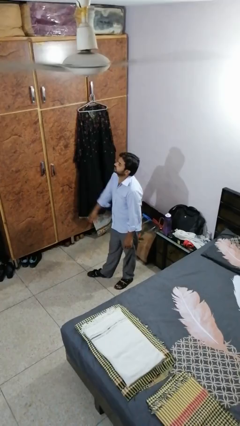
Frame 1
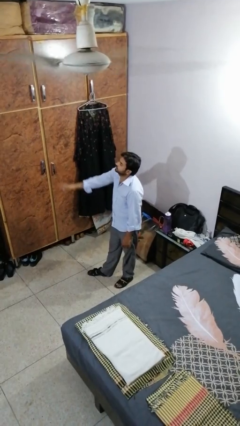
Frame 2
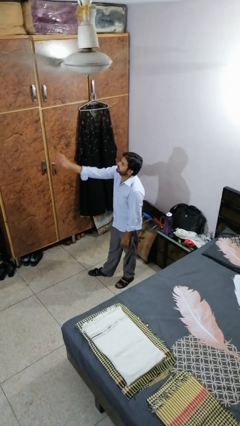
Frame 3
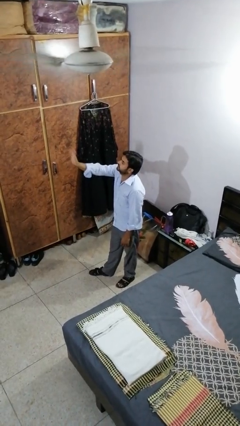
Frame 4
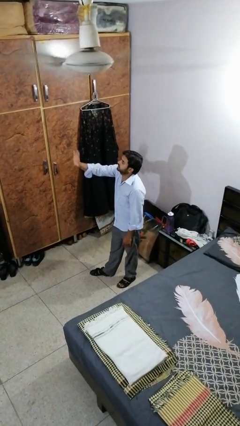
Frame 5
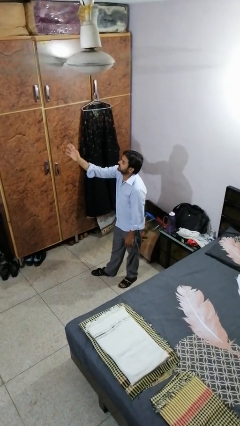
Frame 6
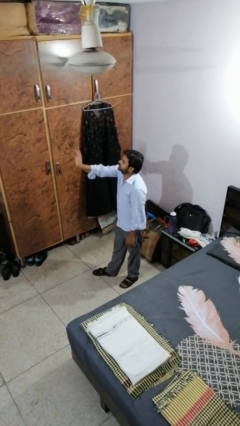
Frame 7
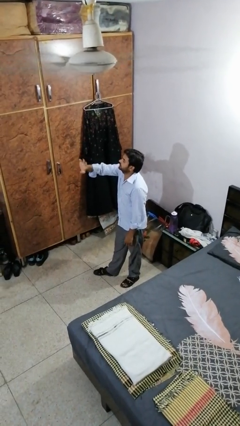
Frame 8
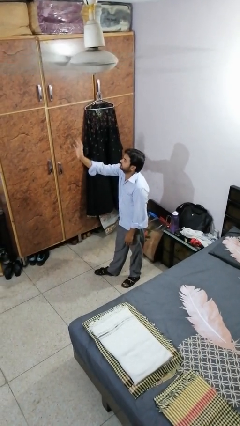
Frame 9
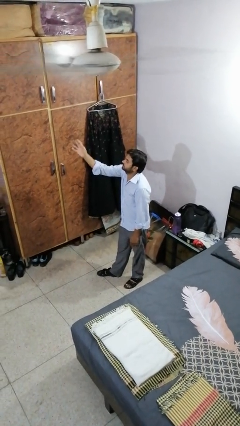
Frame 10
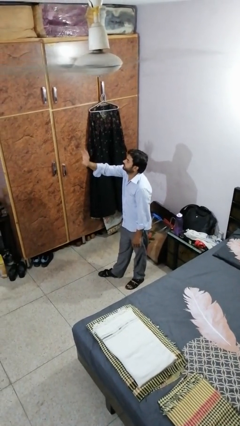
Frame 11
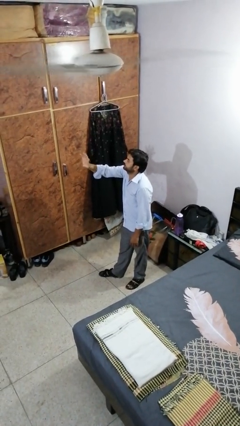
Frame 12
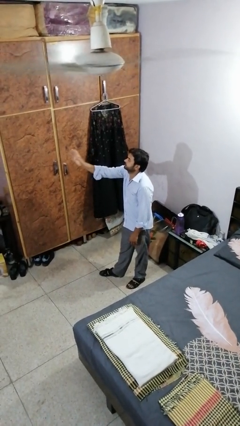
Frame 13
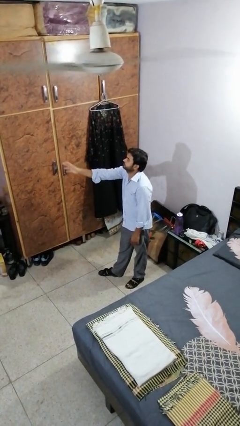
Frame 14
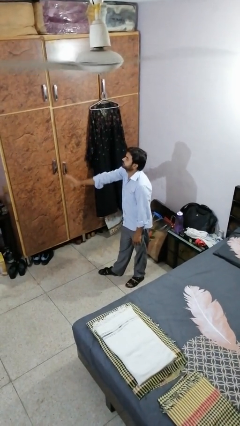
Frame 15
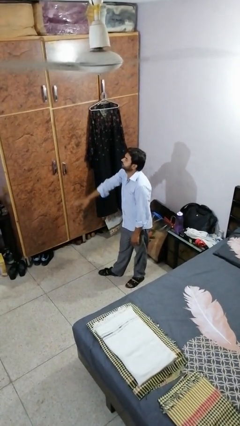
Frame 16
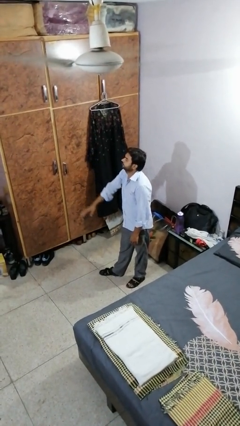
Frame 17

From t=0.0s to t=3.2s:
person waves at person

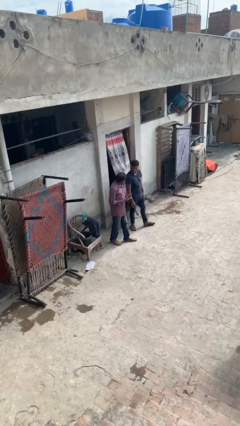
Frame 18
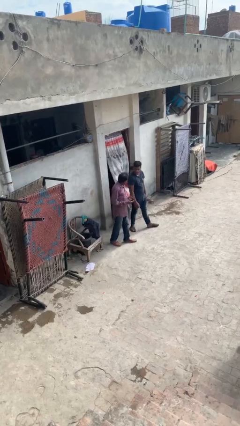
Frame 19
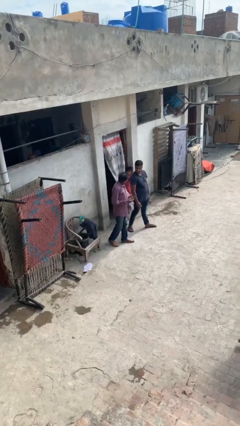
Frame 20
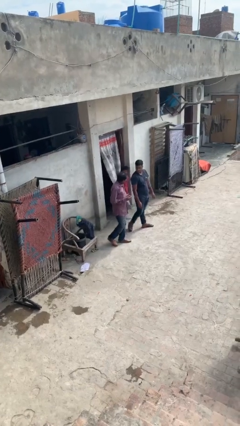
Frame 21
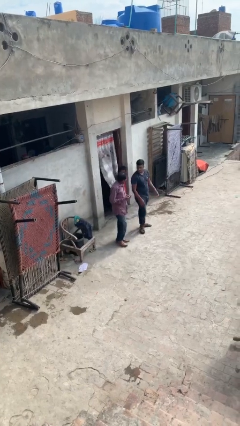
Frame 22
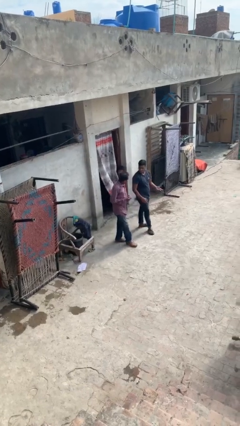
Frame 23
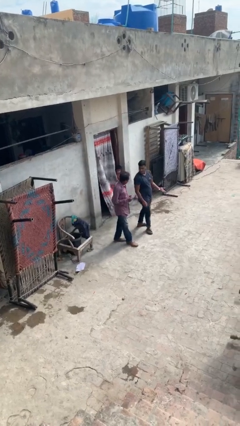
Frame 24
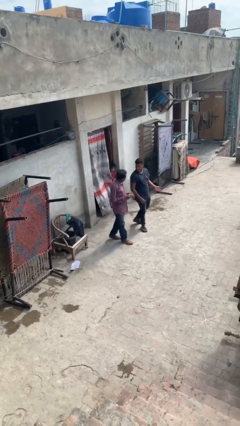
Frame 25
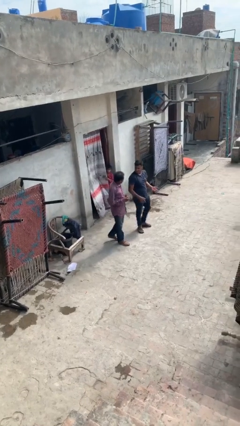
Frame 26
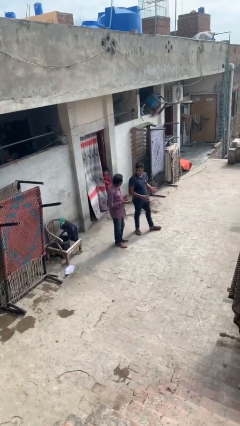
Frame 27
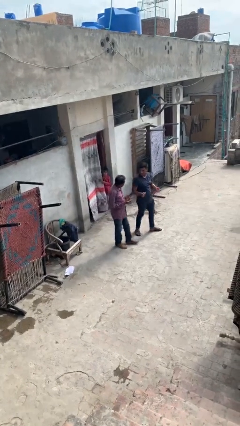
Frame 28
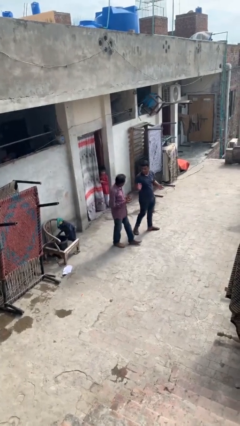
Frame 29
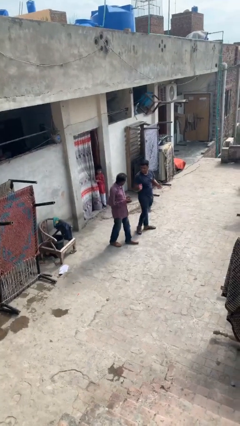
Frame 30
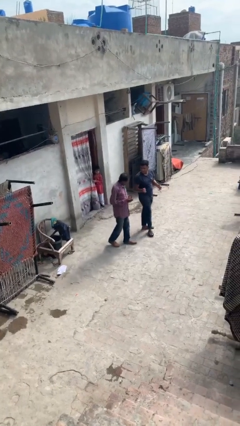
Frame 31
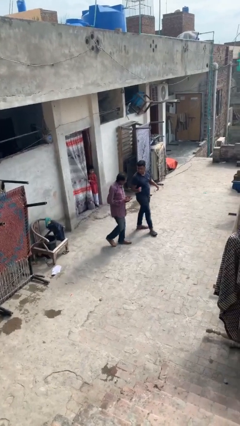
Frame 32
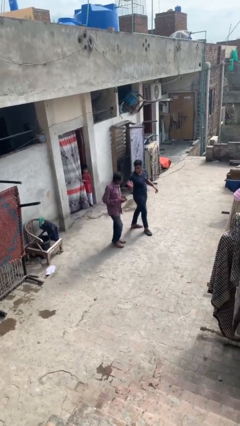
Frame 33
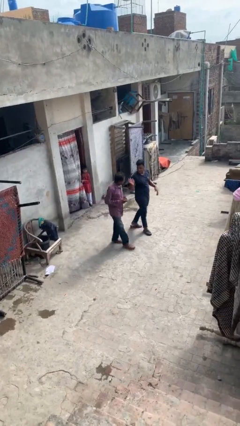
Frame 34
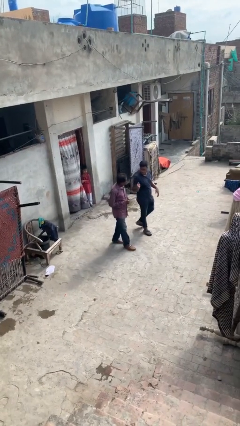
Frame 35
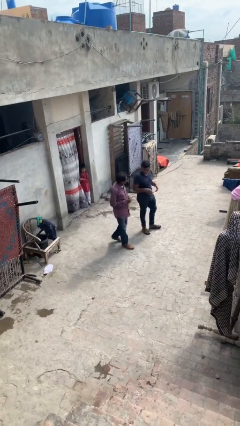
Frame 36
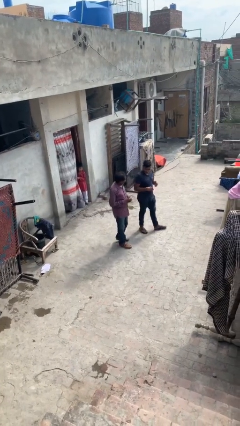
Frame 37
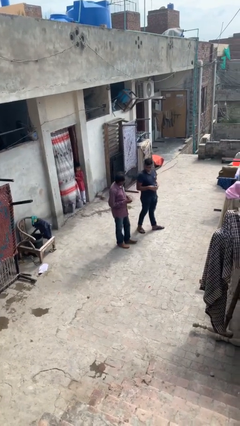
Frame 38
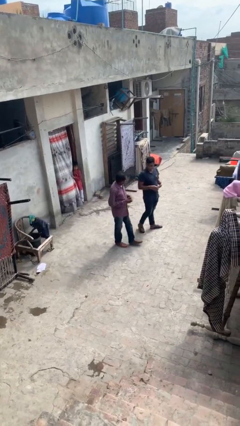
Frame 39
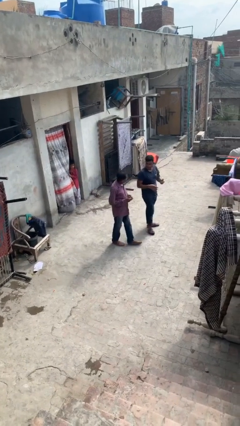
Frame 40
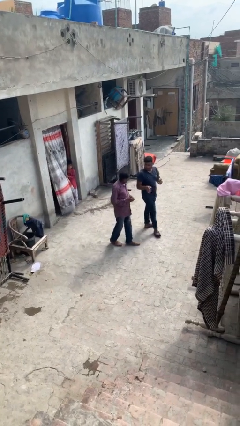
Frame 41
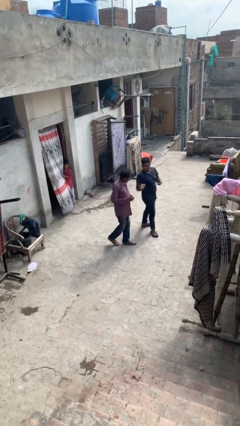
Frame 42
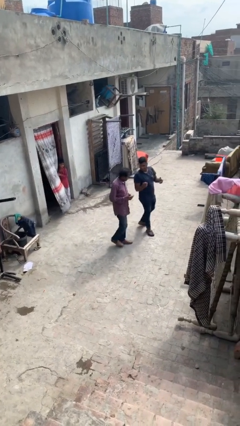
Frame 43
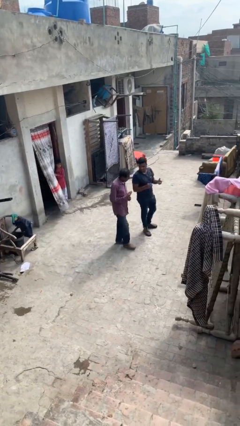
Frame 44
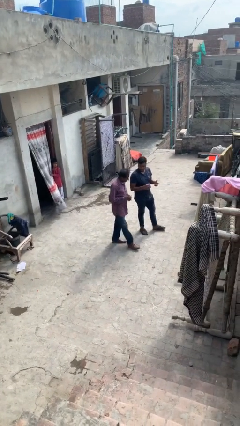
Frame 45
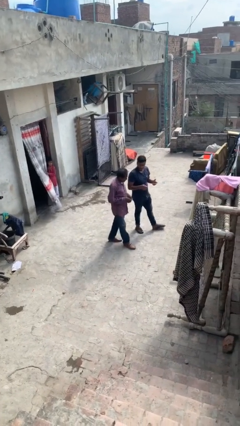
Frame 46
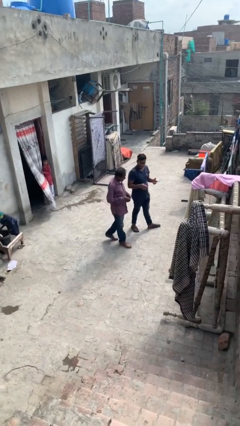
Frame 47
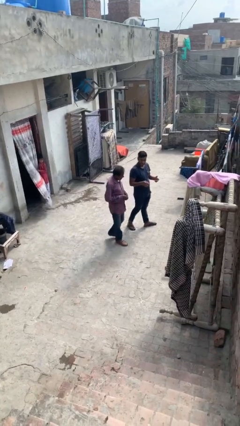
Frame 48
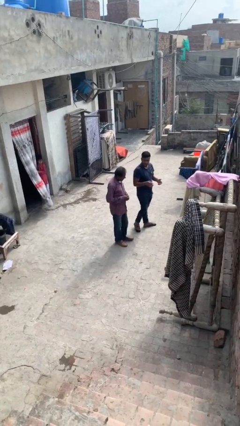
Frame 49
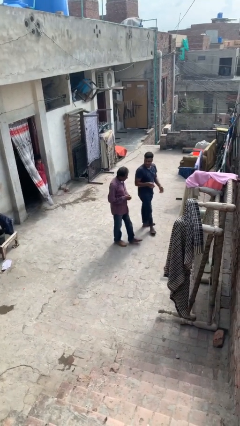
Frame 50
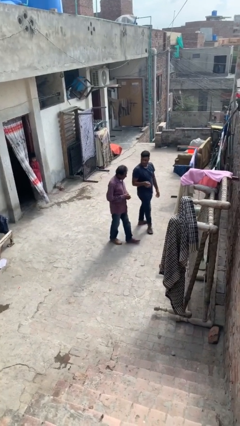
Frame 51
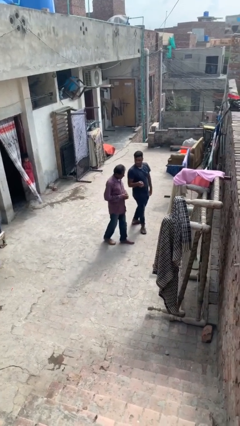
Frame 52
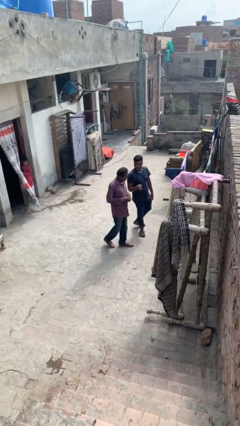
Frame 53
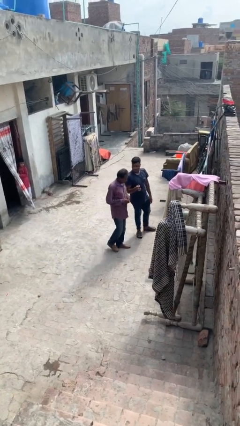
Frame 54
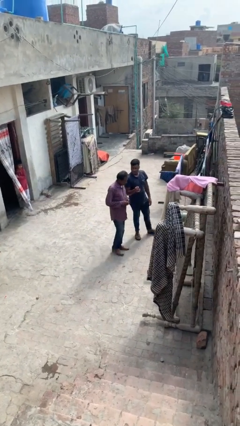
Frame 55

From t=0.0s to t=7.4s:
person talks to person

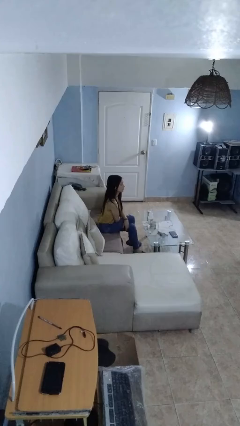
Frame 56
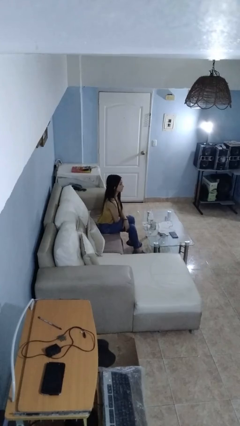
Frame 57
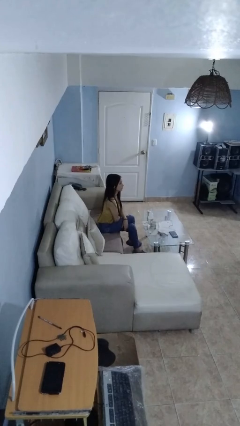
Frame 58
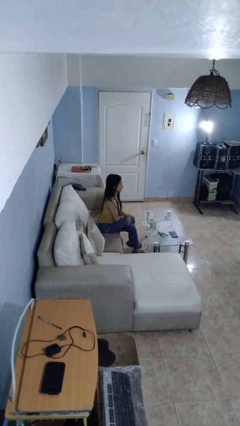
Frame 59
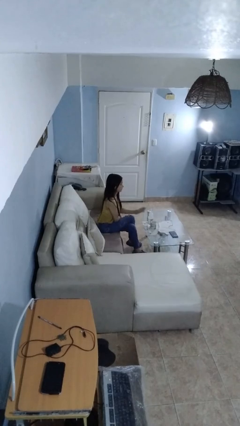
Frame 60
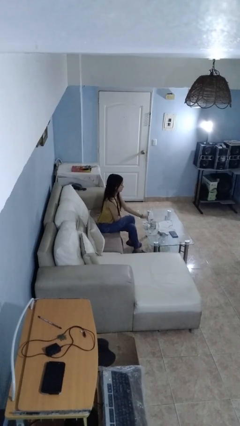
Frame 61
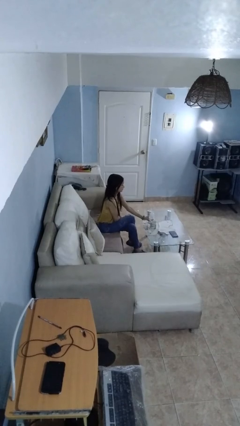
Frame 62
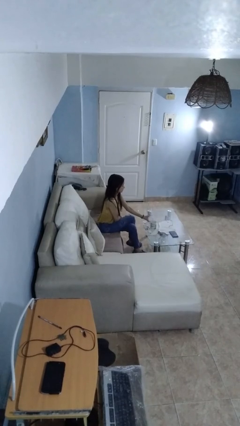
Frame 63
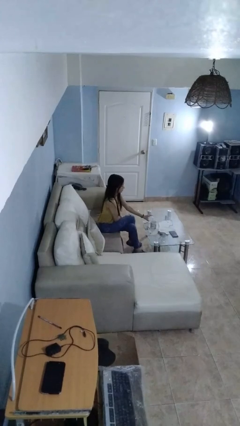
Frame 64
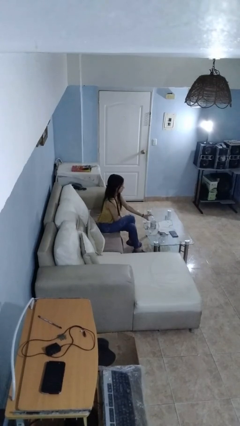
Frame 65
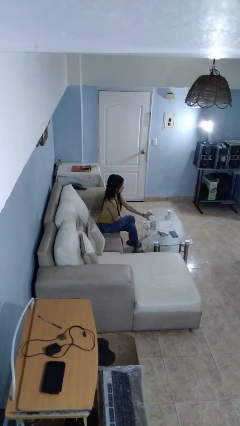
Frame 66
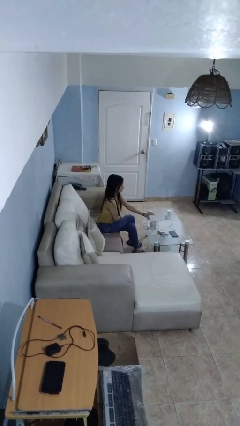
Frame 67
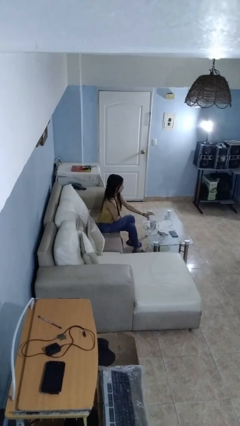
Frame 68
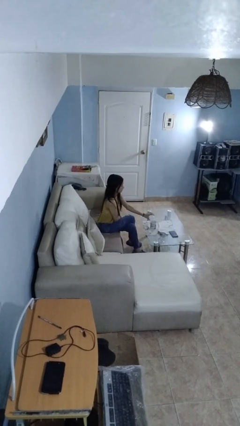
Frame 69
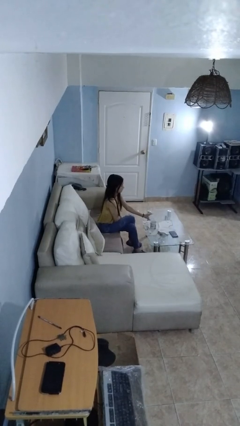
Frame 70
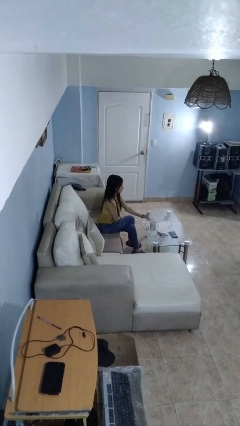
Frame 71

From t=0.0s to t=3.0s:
person pours liquid into cup

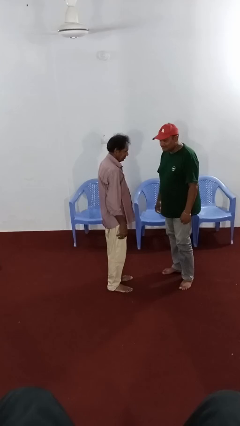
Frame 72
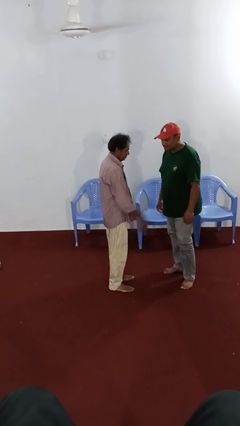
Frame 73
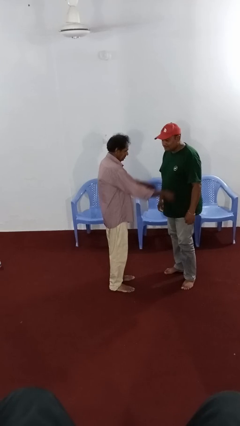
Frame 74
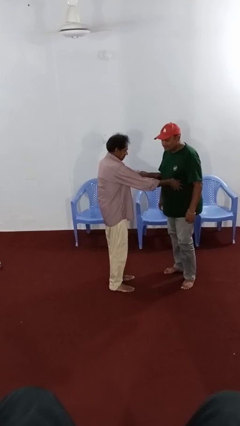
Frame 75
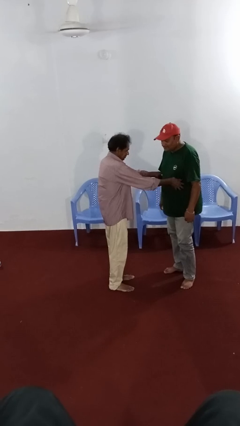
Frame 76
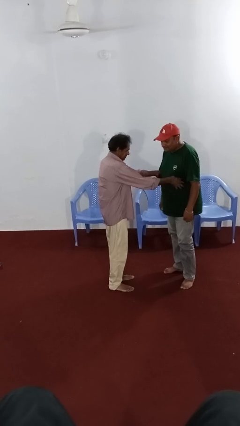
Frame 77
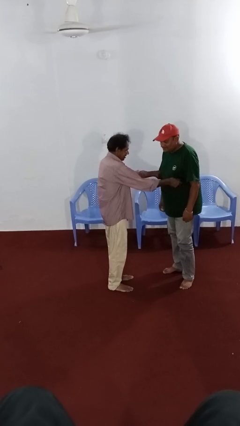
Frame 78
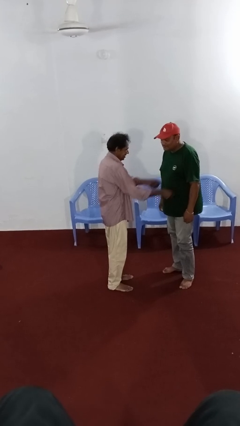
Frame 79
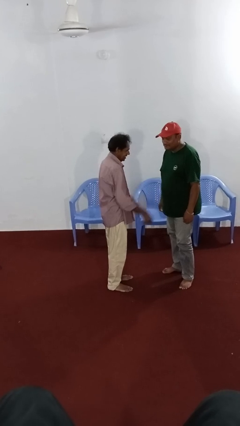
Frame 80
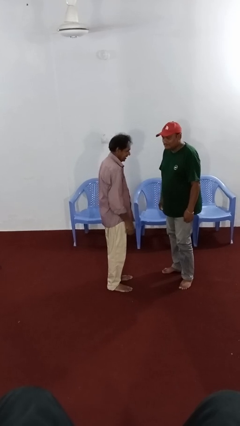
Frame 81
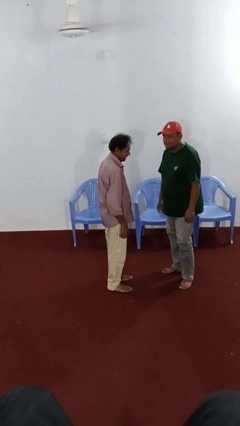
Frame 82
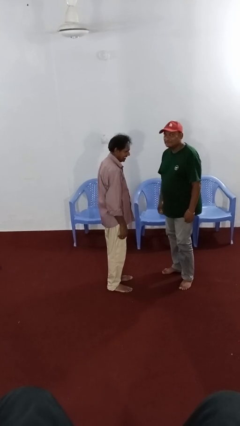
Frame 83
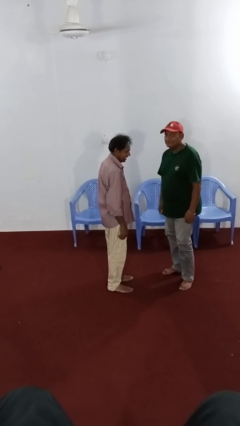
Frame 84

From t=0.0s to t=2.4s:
person tickles person

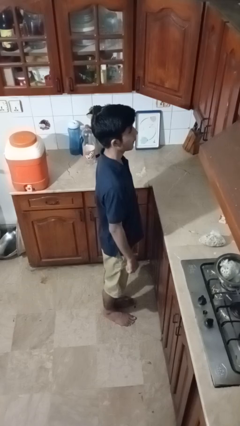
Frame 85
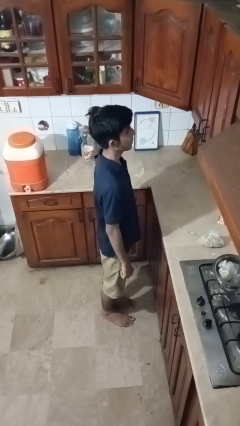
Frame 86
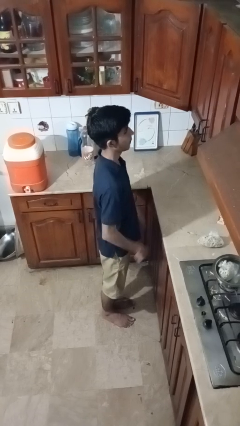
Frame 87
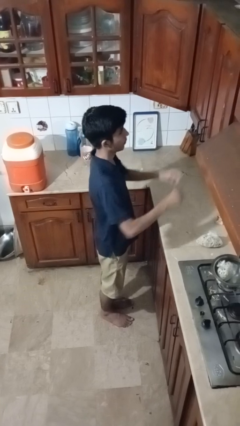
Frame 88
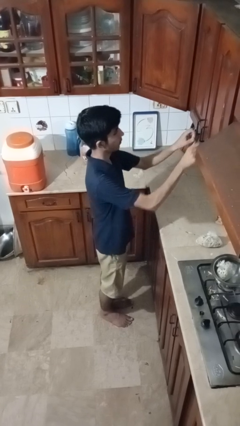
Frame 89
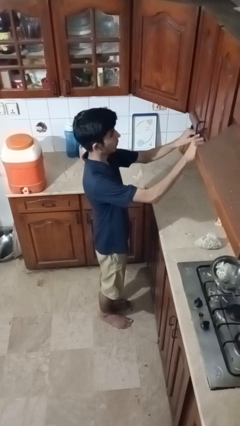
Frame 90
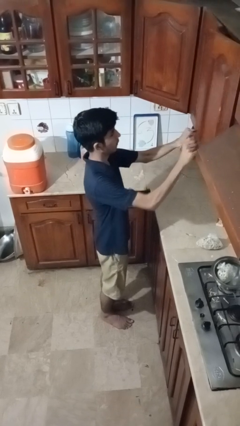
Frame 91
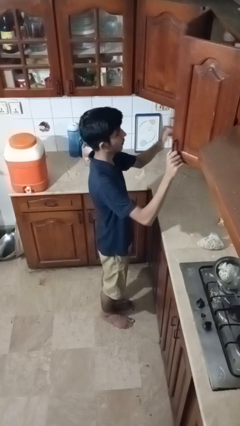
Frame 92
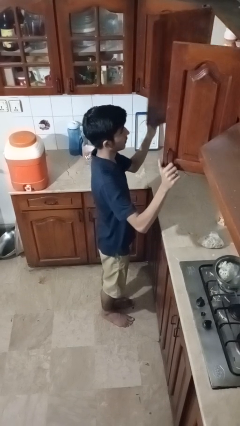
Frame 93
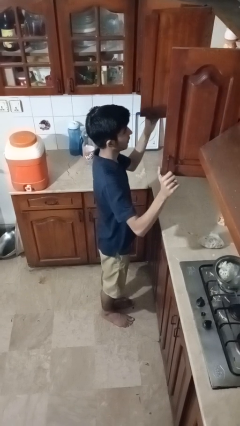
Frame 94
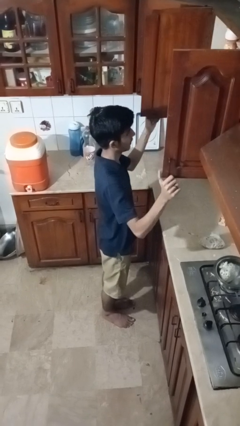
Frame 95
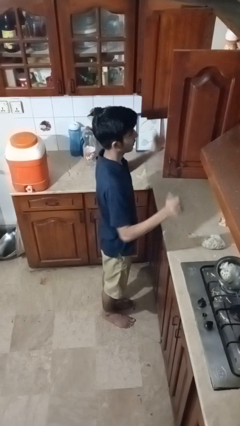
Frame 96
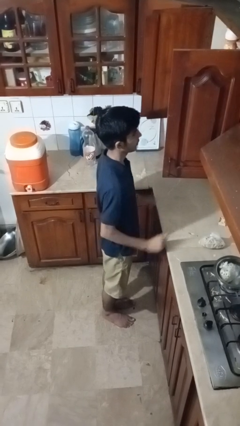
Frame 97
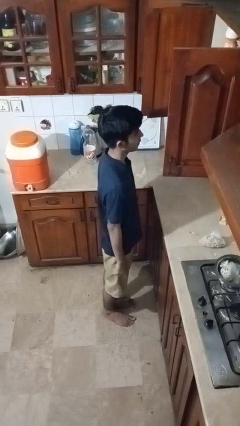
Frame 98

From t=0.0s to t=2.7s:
person opens cabinet
